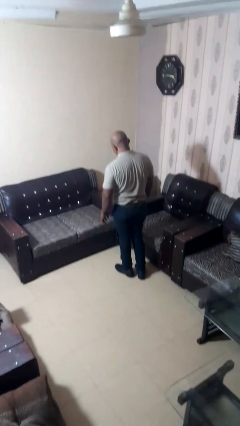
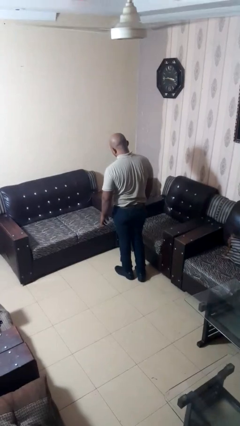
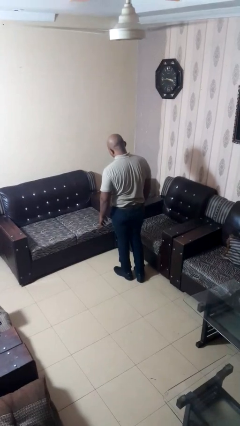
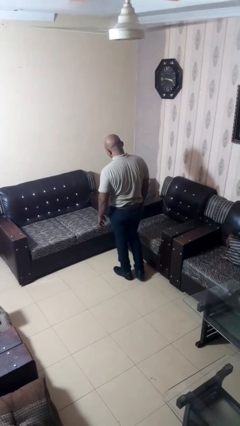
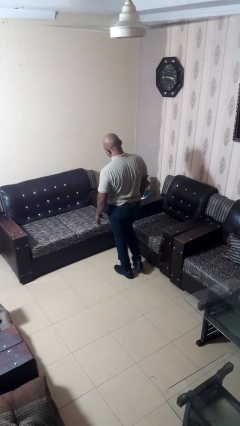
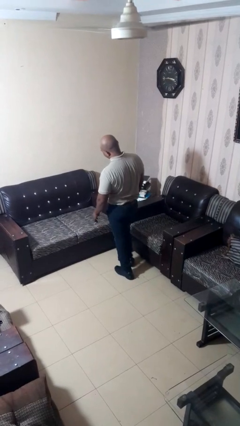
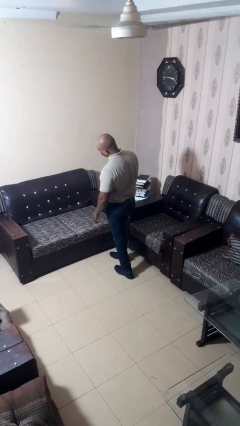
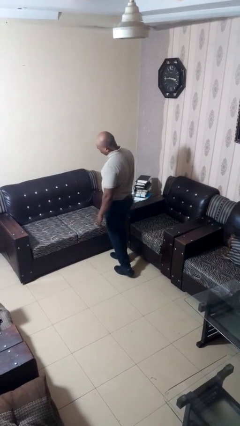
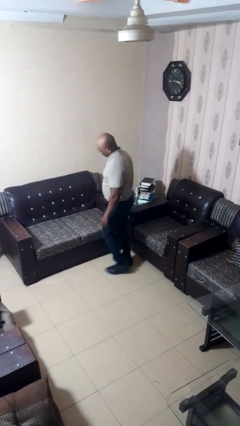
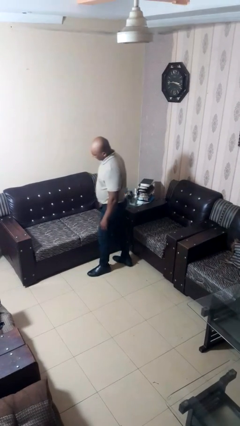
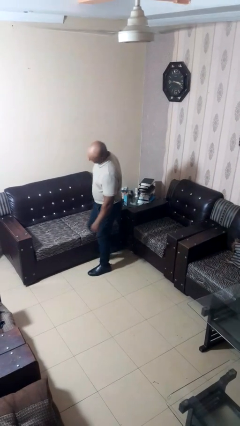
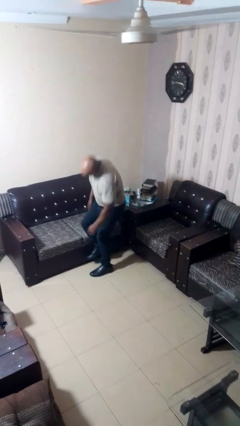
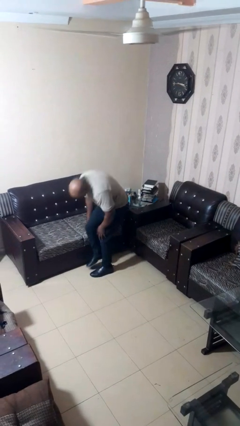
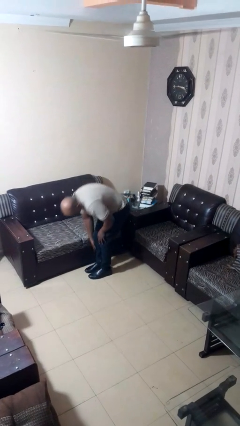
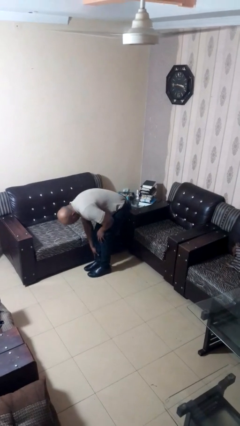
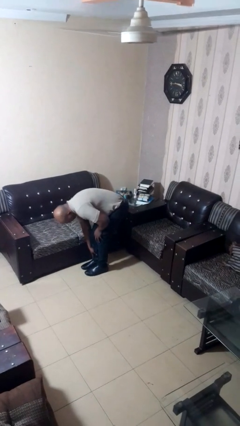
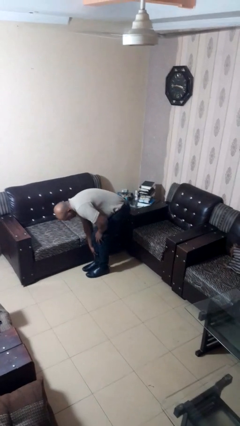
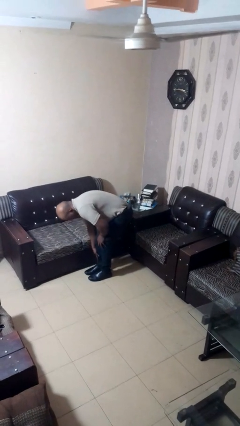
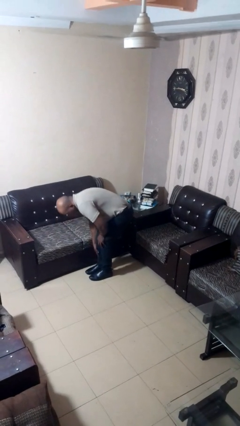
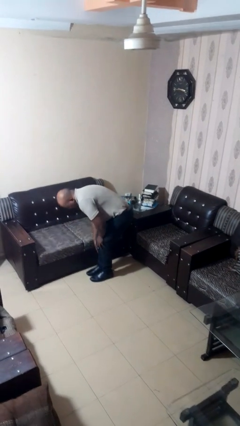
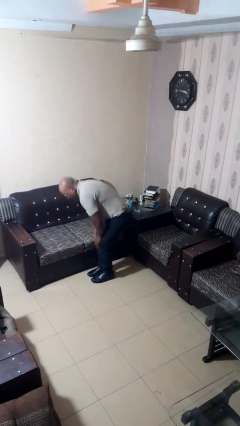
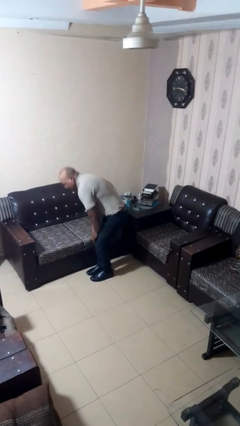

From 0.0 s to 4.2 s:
person stubs toe

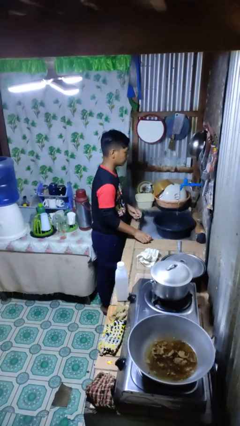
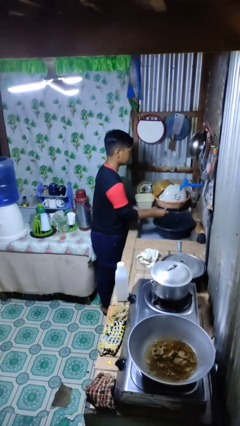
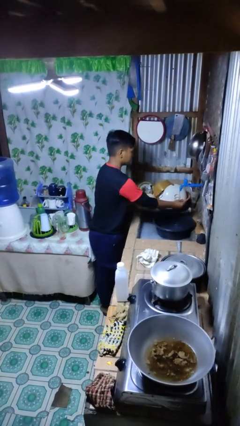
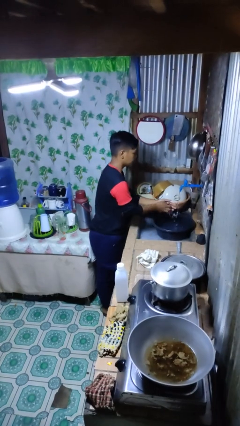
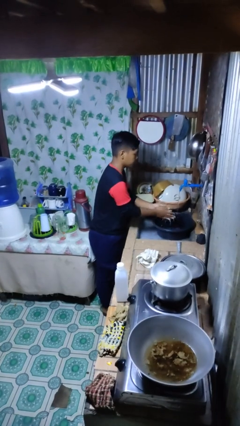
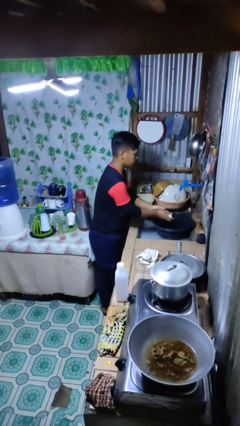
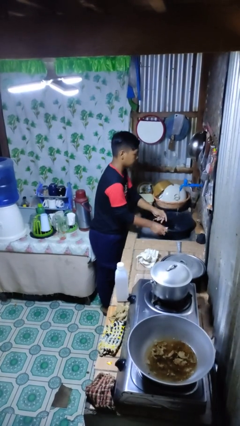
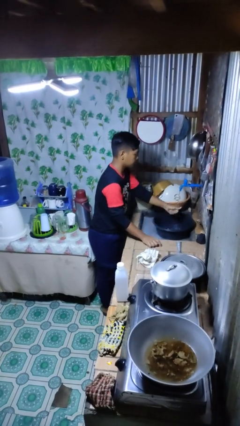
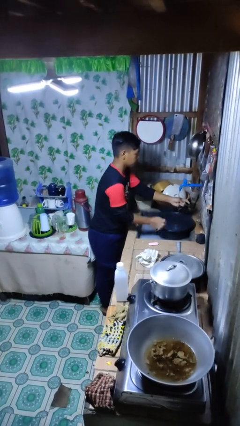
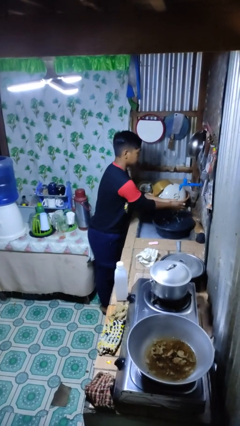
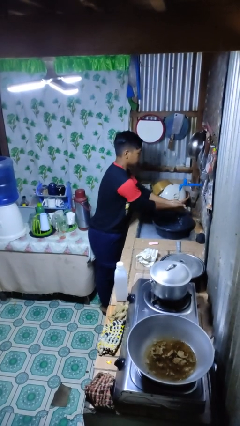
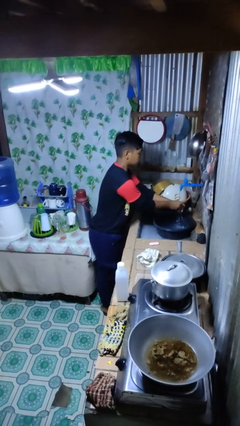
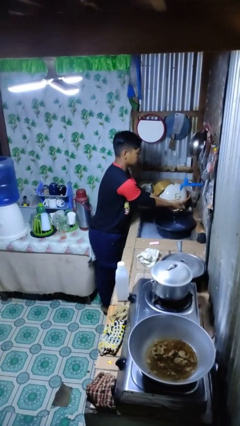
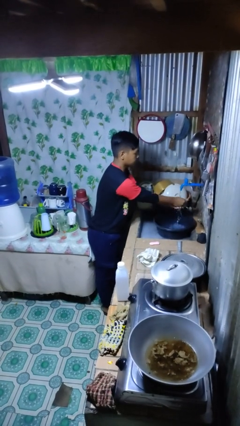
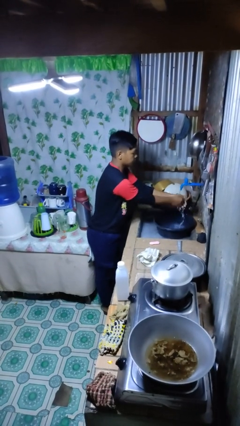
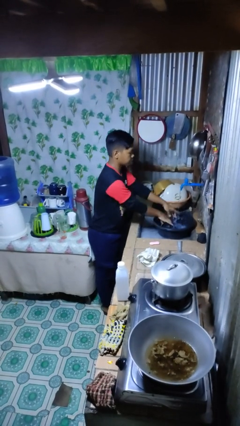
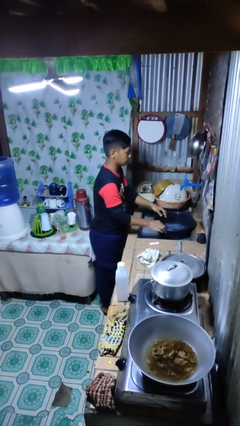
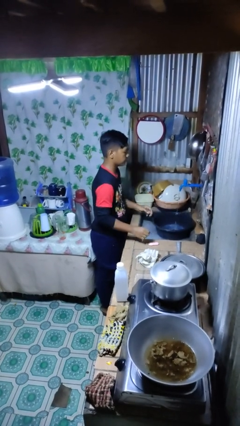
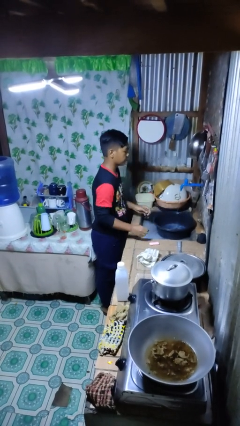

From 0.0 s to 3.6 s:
person washes hands

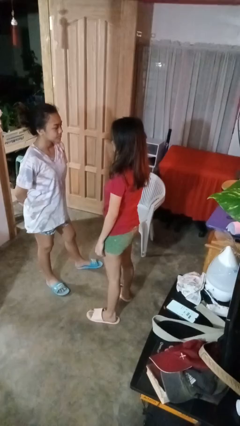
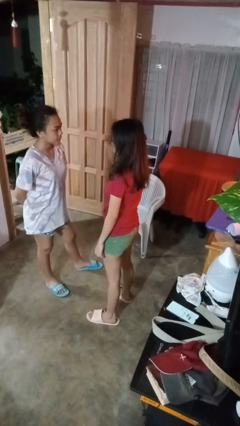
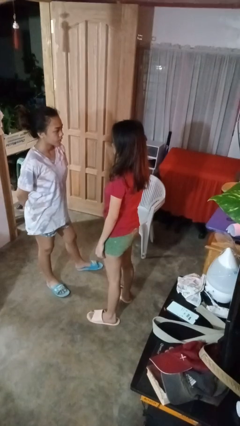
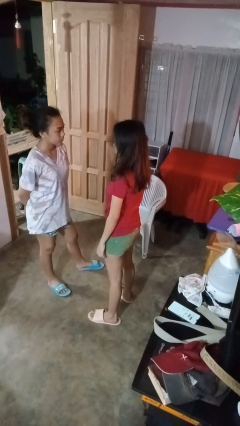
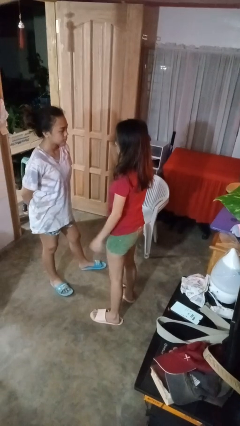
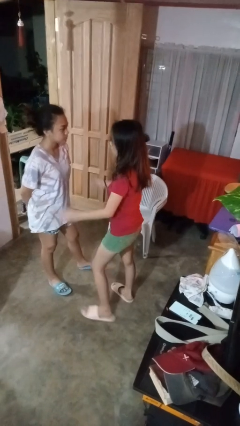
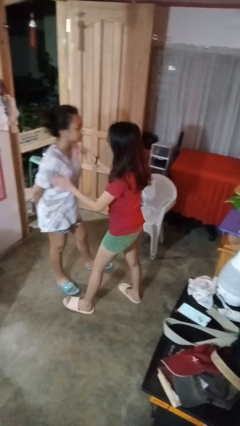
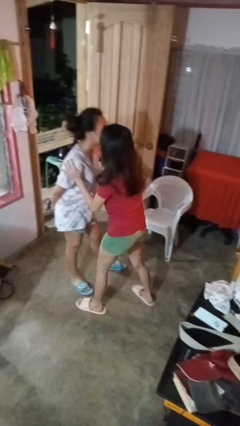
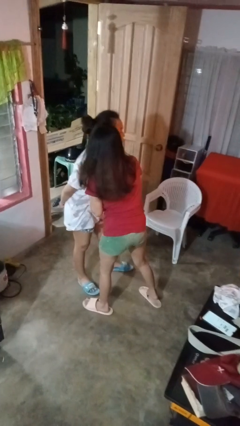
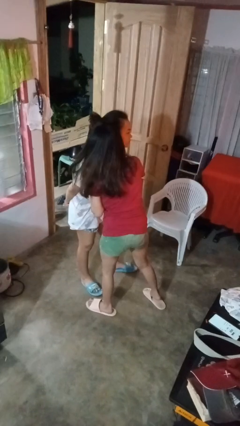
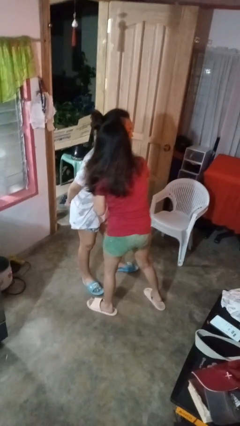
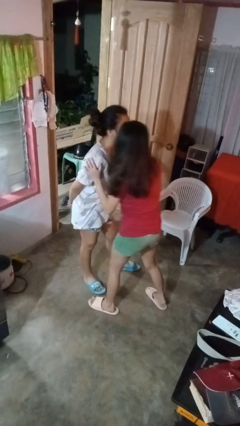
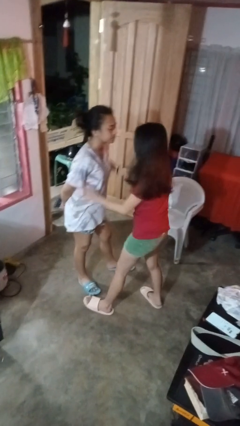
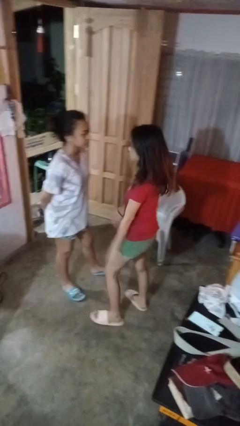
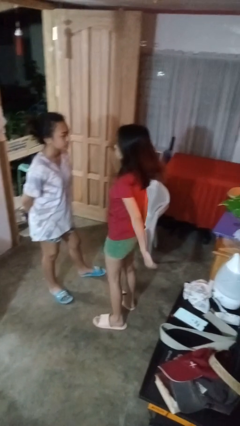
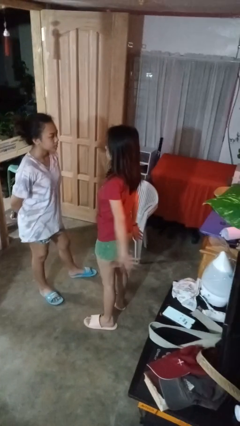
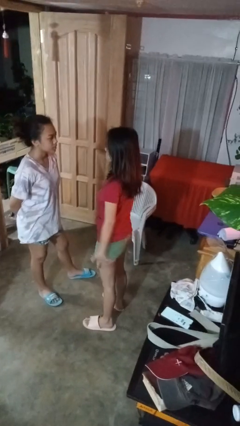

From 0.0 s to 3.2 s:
person kisses cheek of person

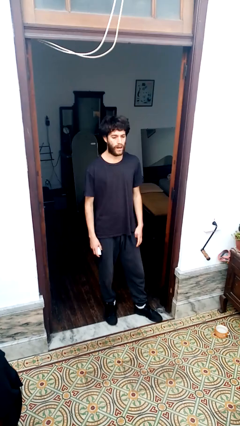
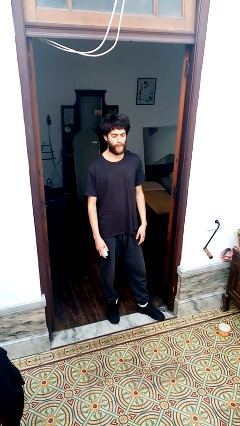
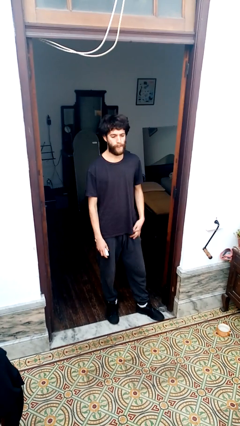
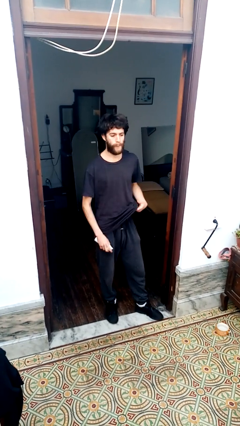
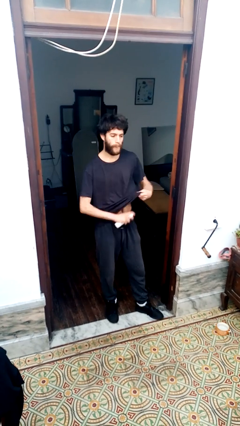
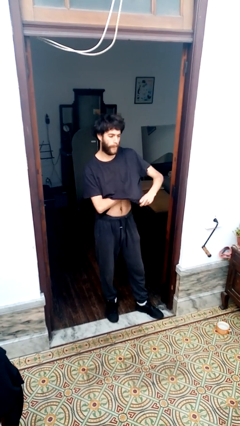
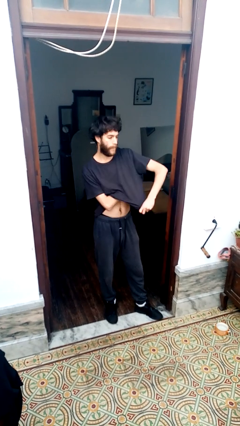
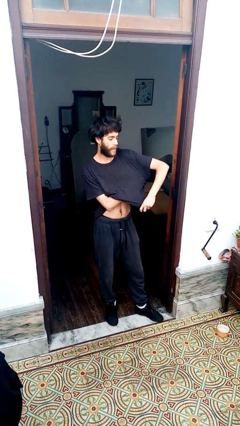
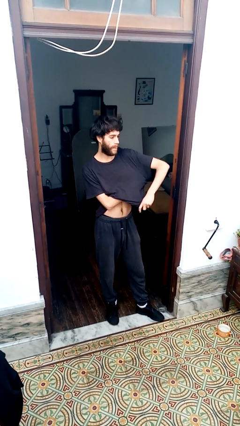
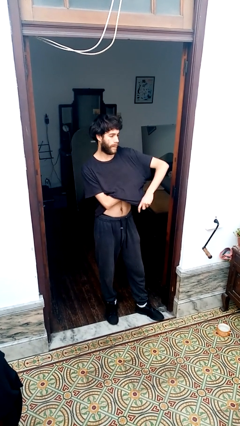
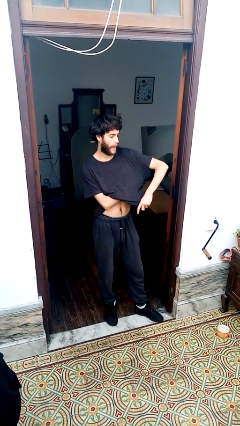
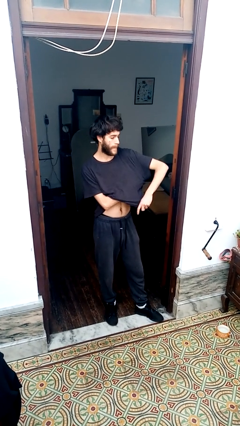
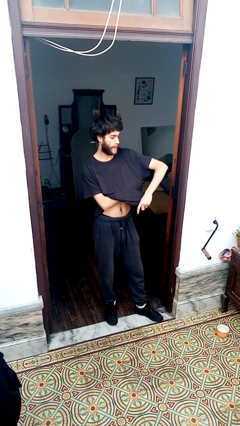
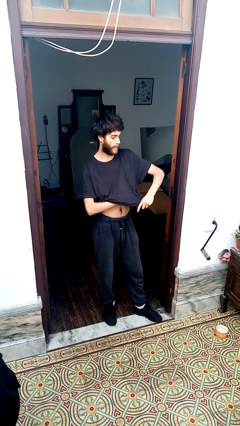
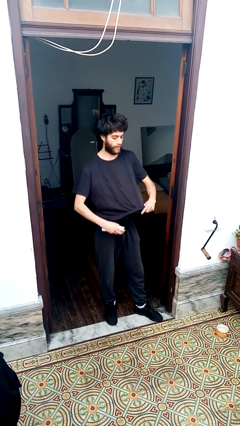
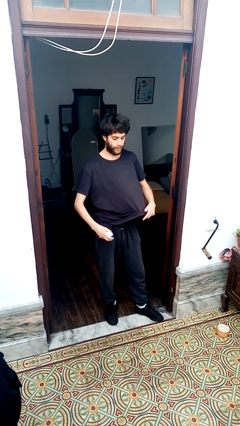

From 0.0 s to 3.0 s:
person applies deodorant

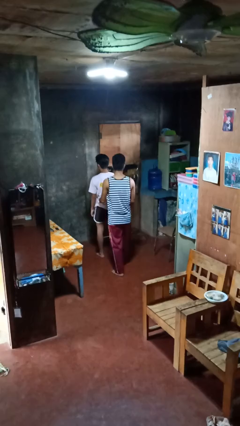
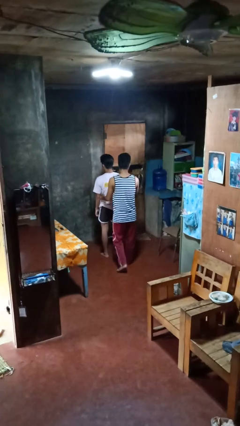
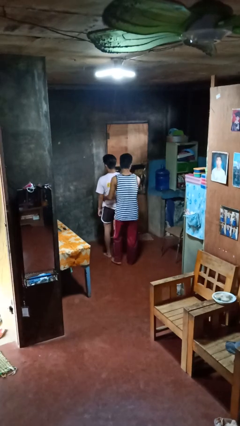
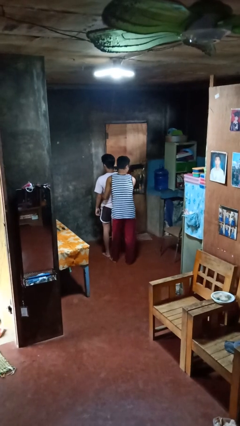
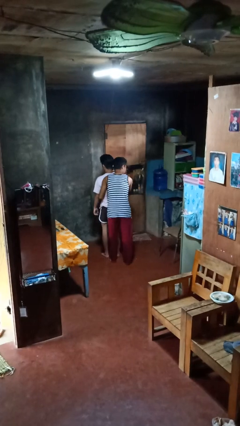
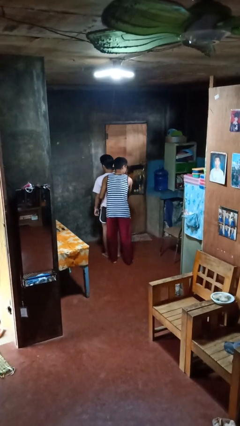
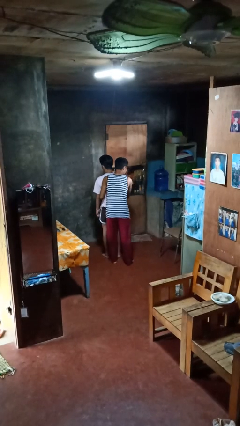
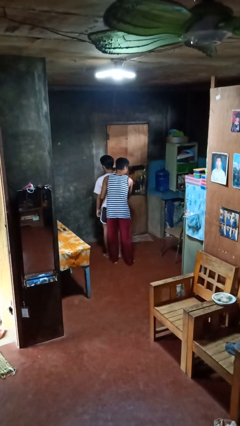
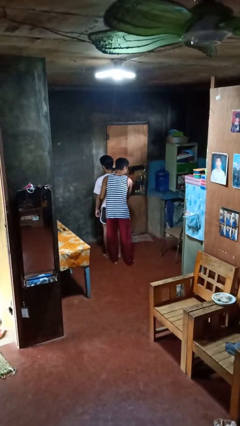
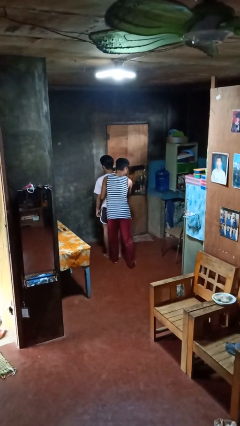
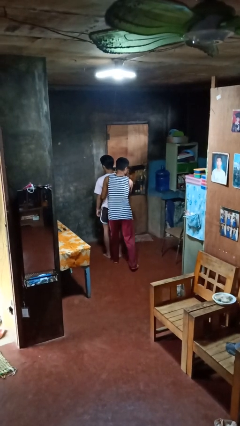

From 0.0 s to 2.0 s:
person hugs person from behind

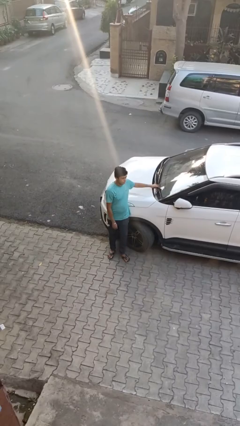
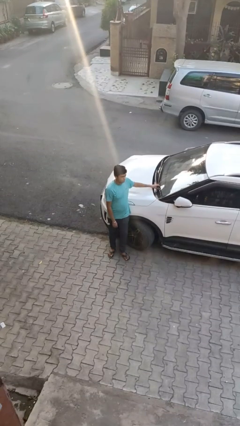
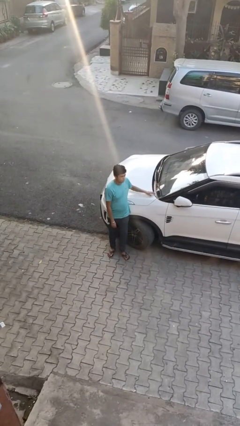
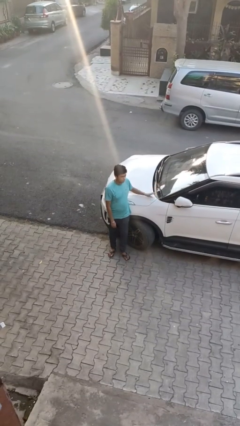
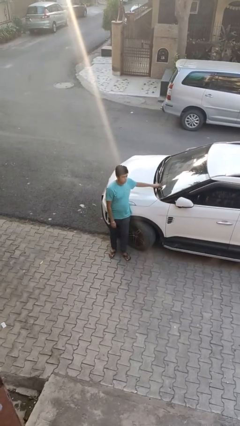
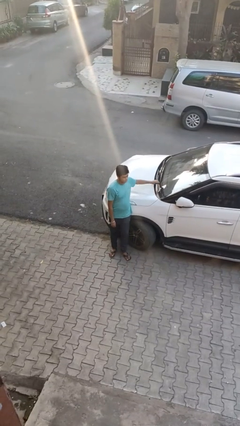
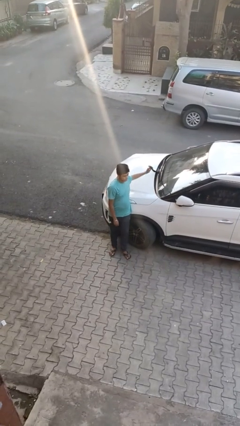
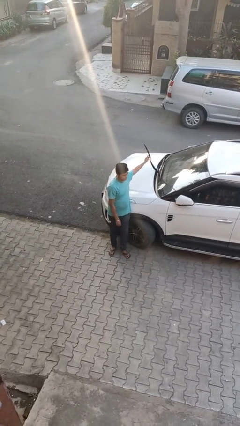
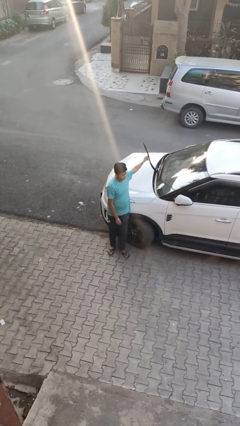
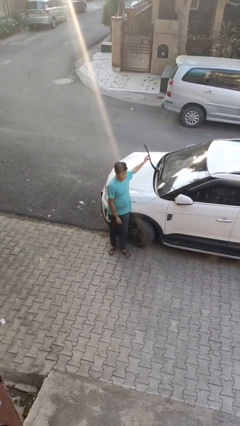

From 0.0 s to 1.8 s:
person flips up car wipers
